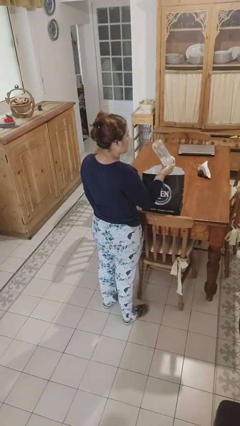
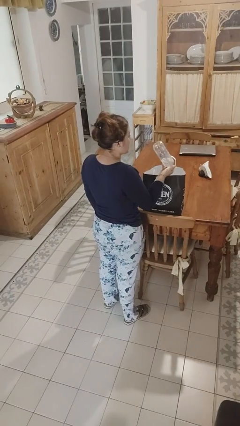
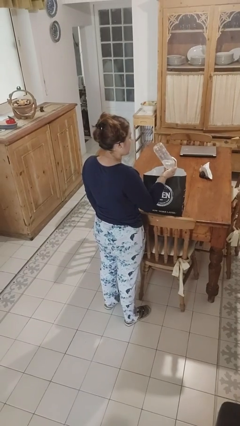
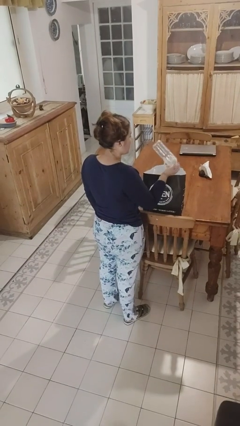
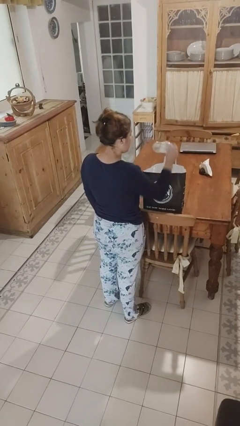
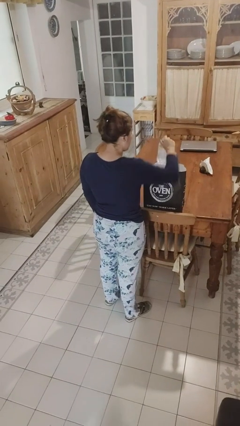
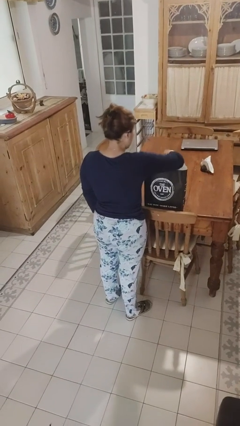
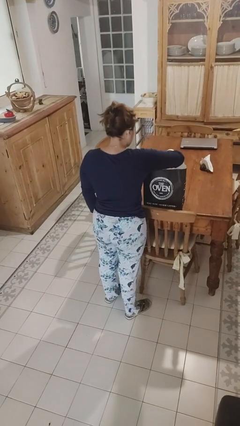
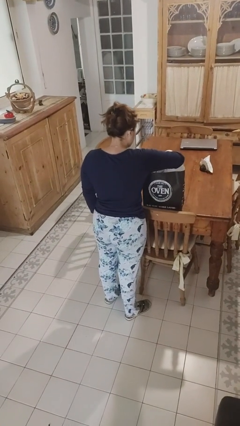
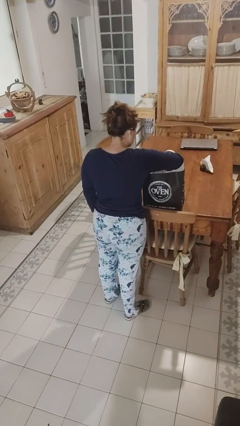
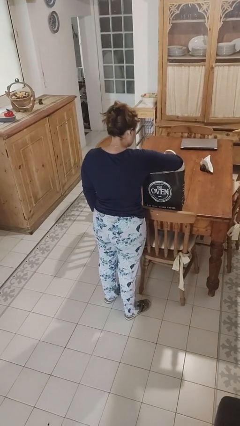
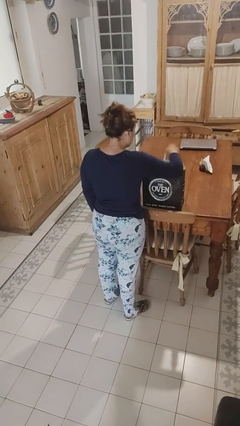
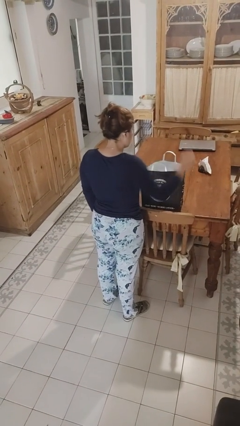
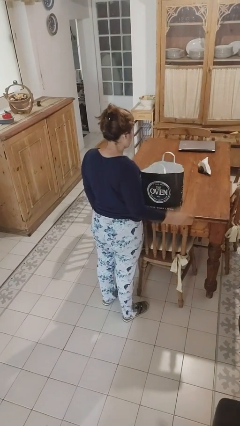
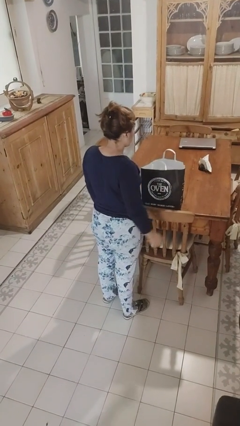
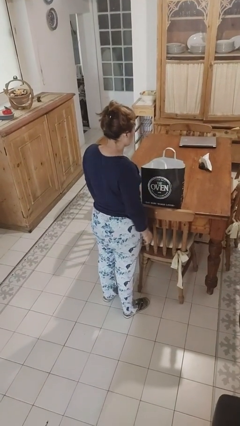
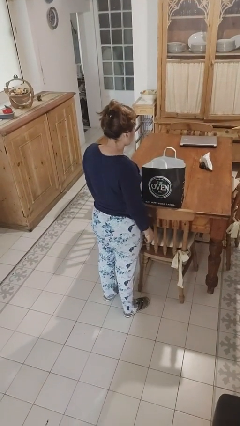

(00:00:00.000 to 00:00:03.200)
person puts object into bag

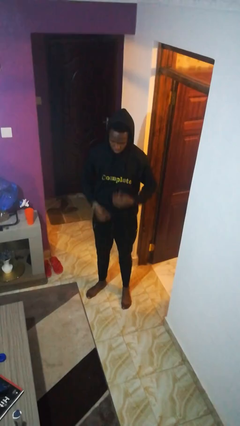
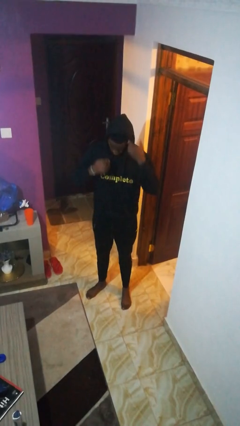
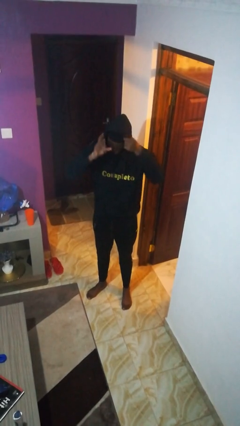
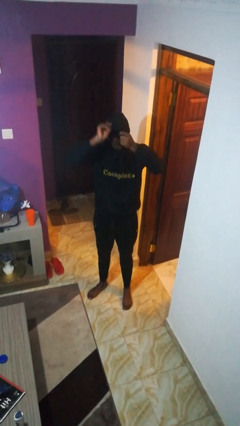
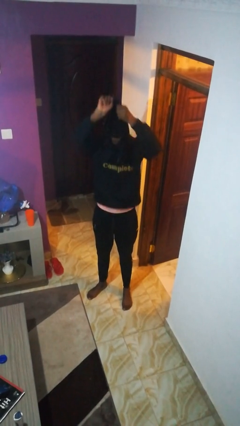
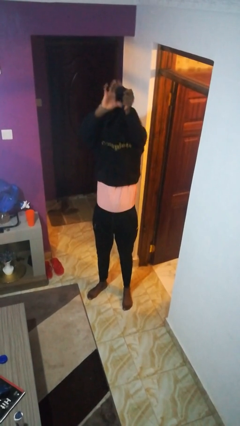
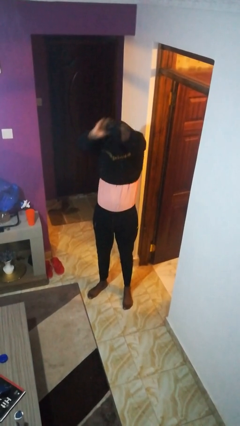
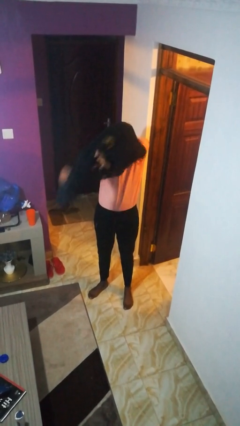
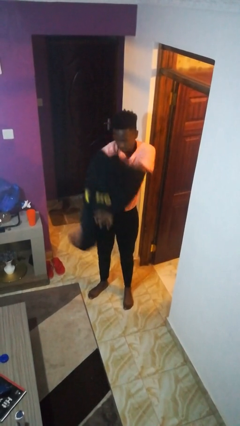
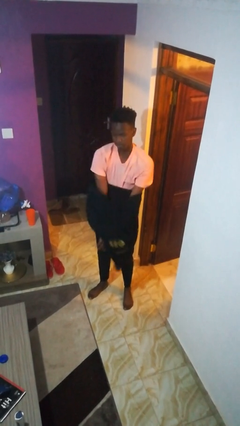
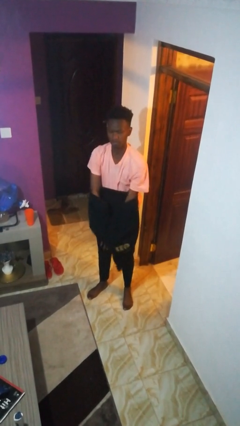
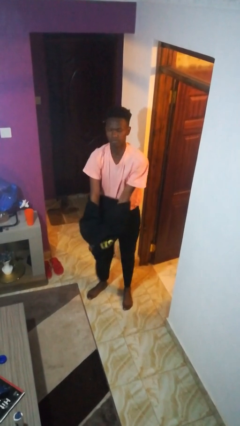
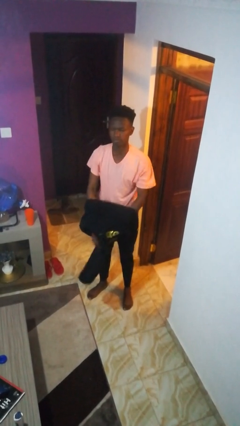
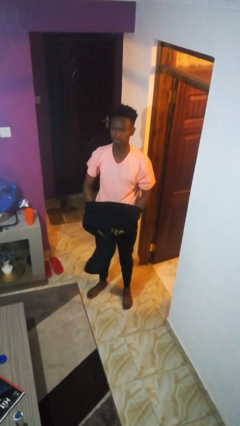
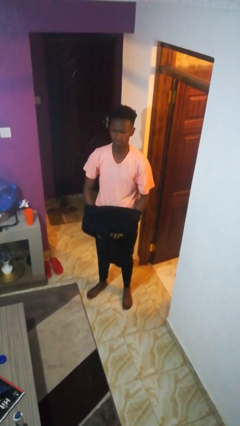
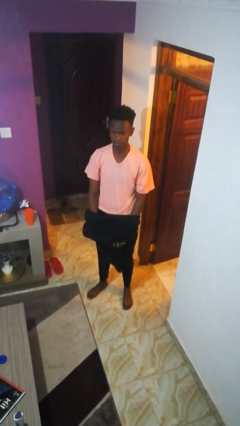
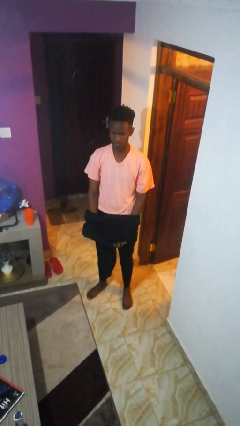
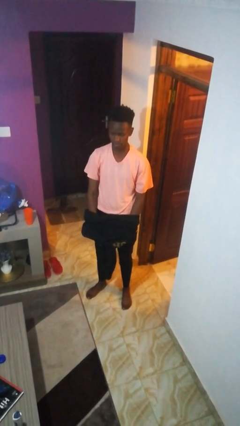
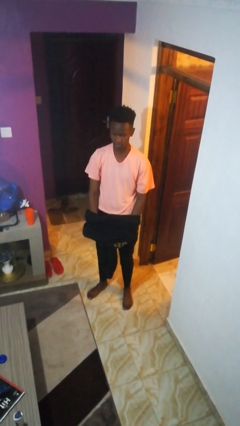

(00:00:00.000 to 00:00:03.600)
person takes off hoodie

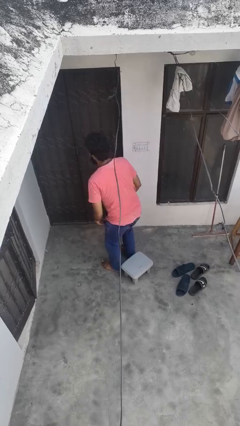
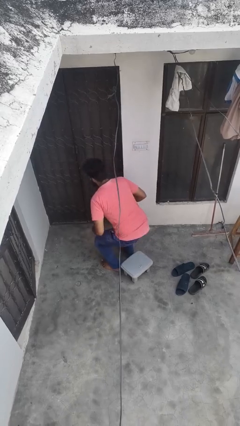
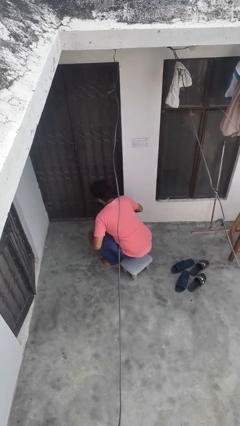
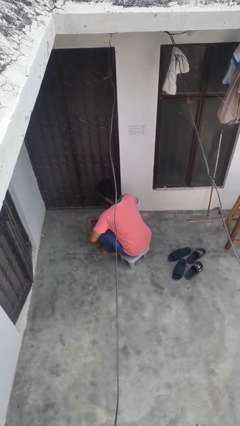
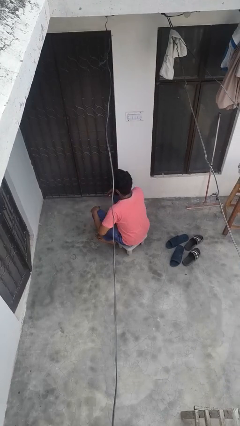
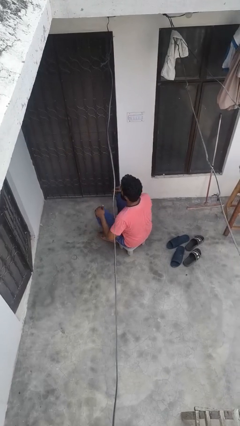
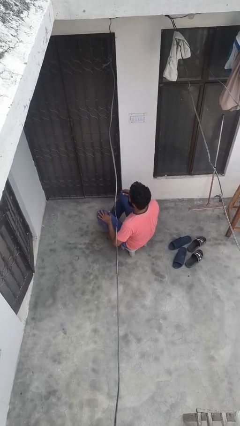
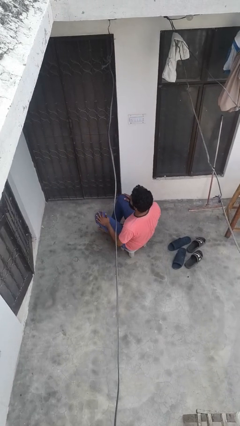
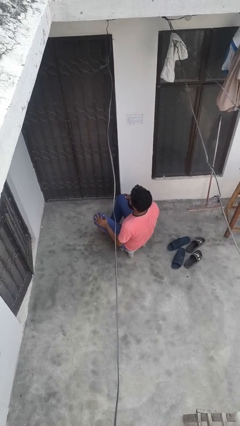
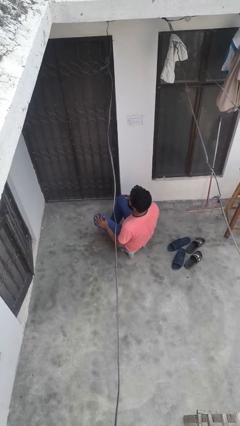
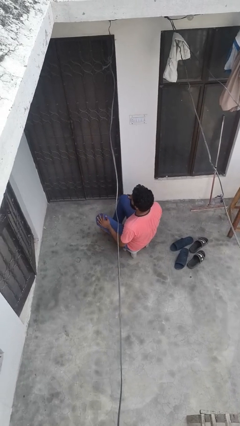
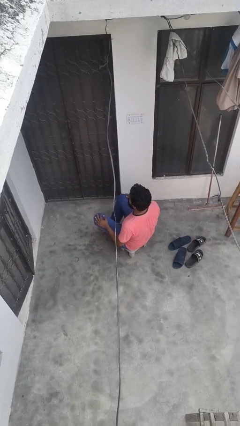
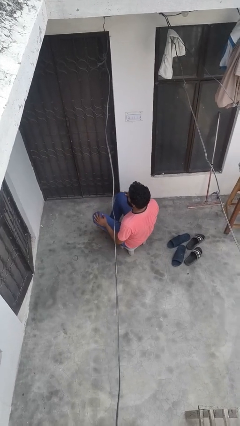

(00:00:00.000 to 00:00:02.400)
person sits crisscross

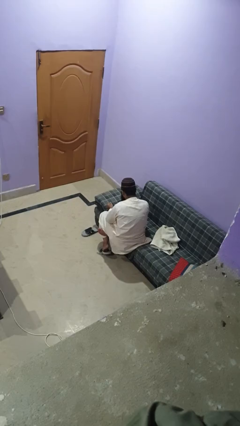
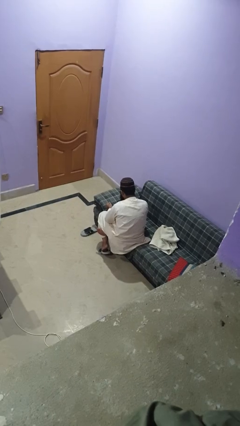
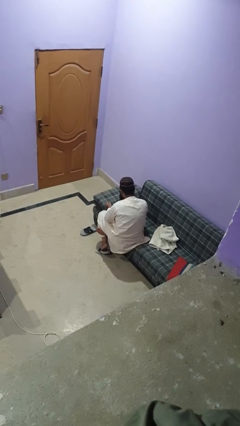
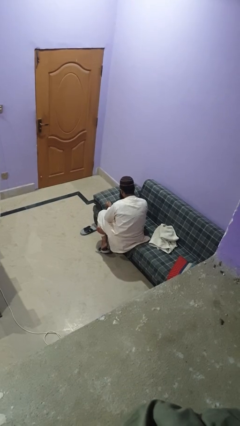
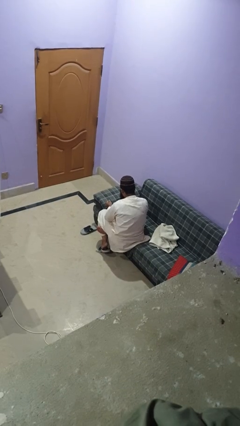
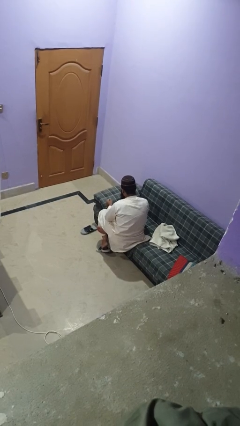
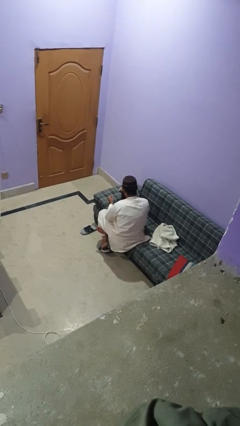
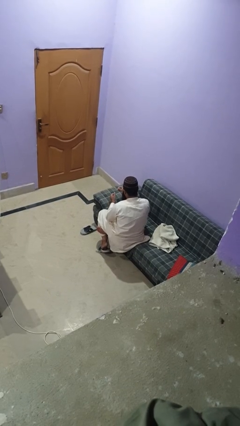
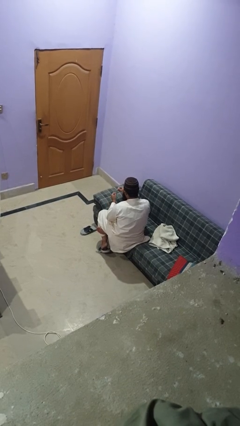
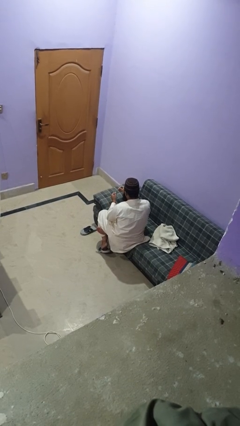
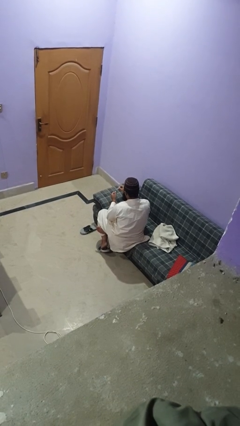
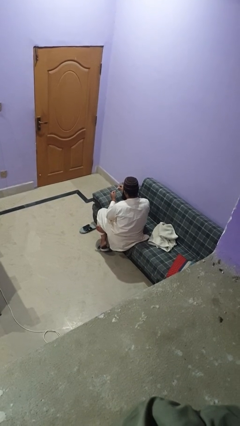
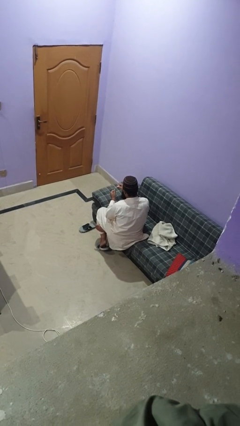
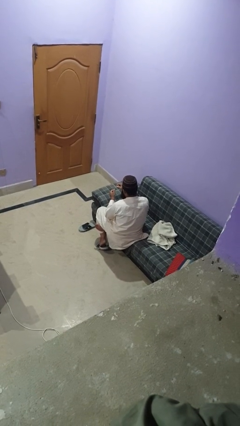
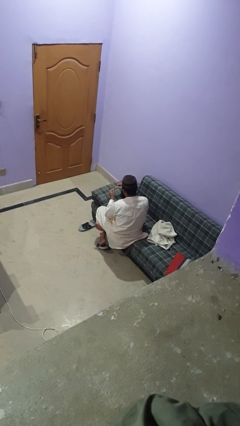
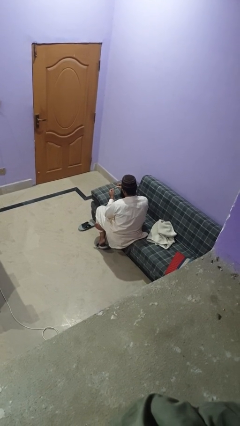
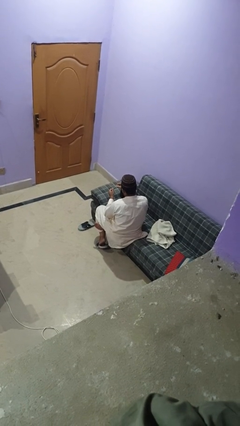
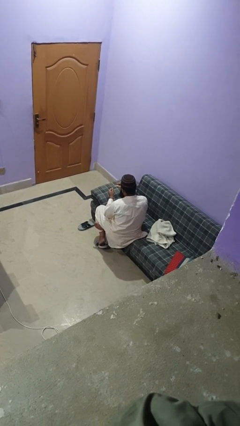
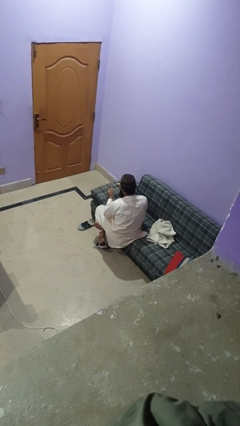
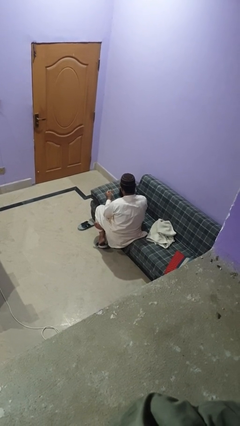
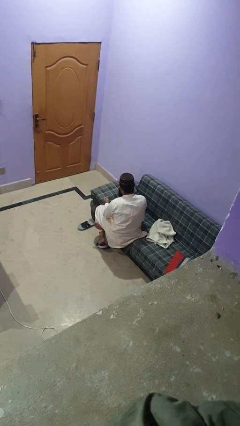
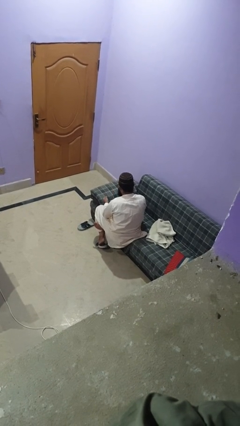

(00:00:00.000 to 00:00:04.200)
person paints fingernails

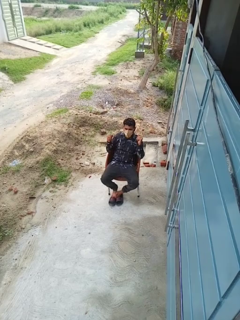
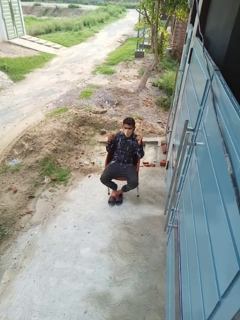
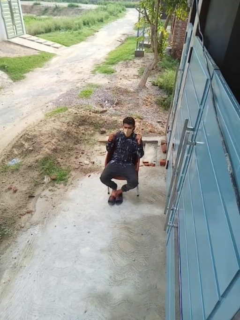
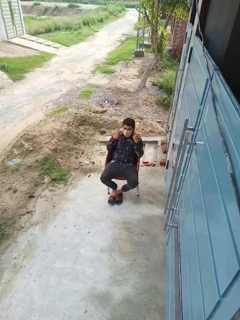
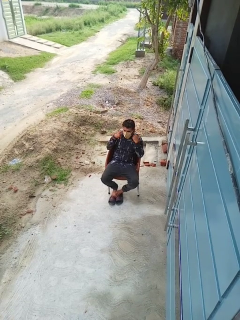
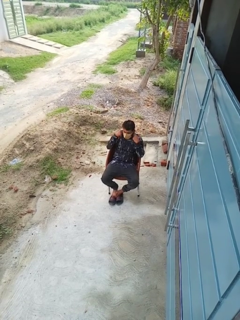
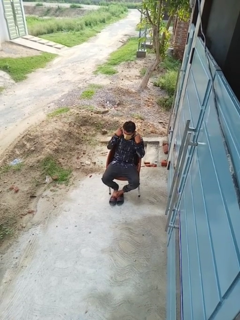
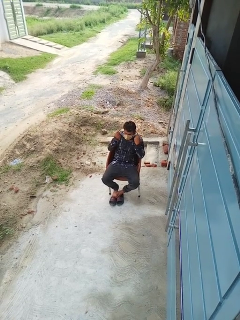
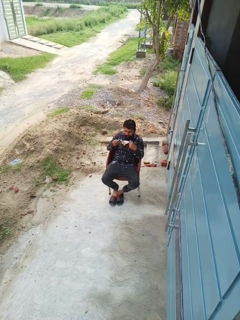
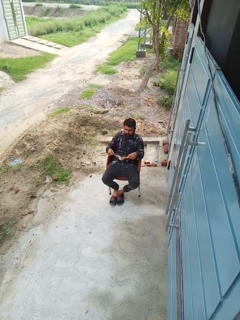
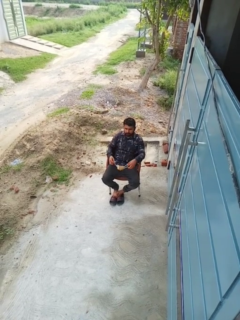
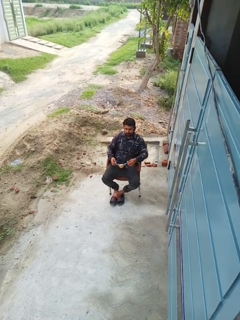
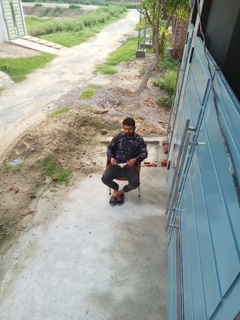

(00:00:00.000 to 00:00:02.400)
person takes off facemask

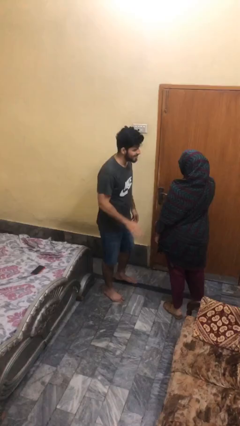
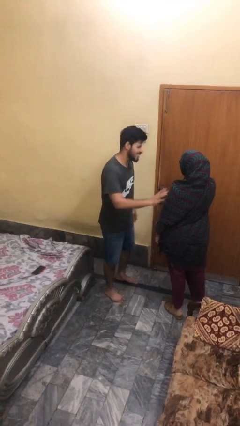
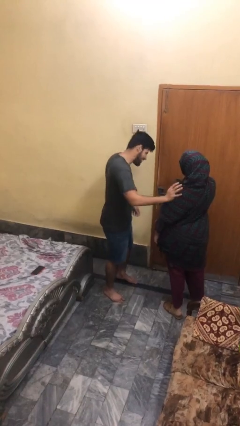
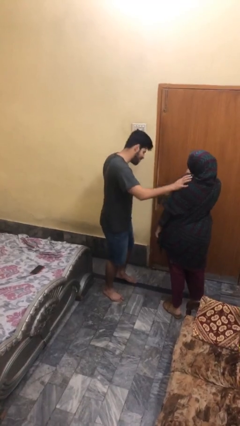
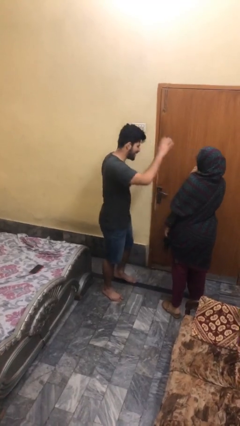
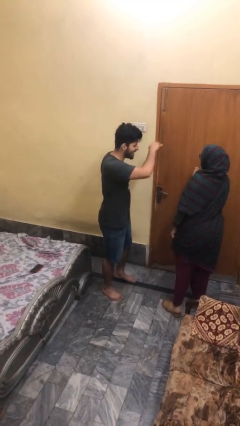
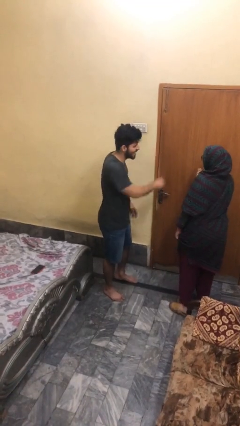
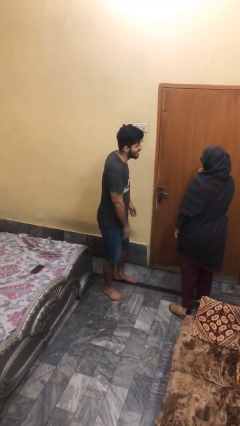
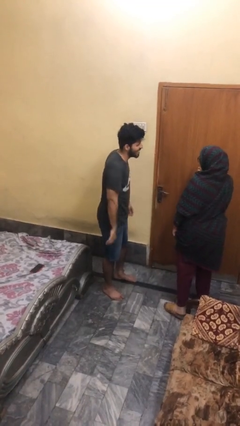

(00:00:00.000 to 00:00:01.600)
person shoves person

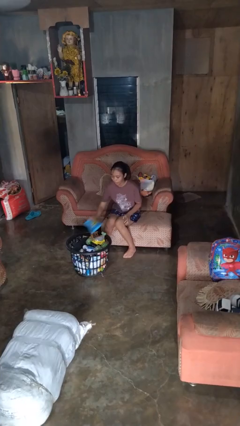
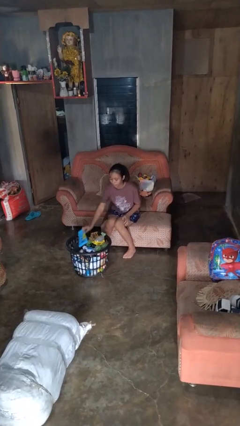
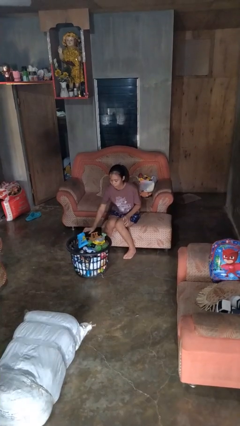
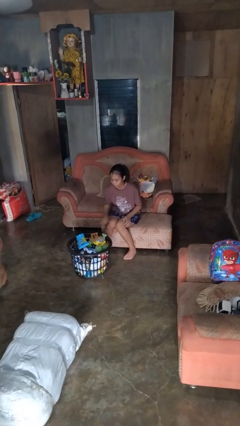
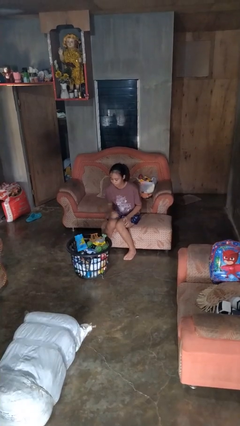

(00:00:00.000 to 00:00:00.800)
person puts object into basket
